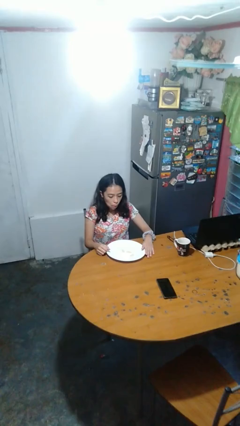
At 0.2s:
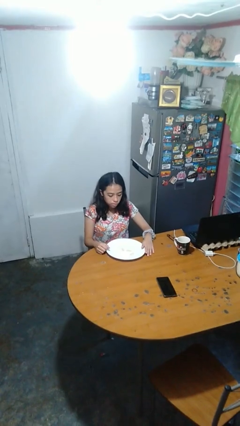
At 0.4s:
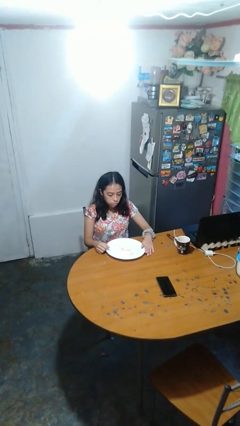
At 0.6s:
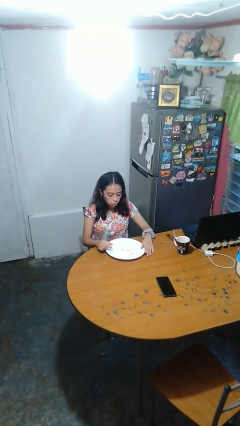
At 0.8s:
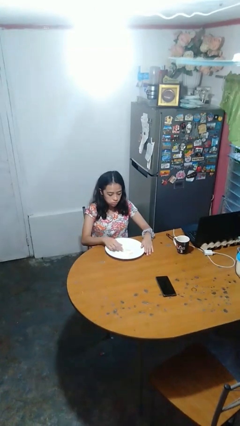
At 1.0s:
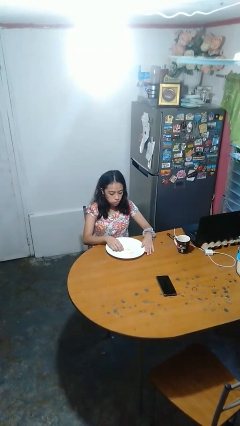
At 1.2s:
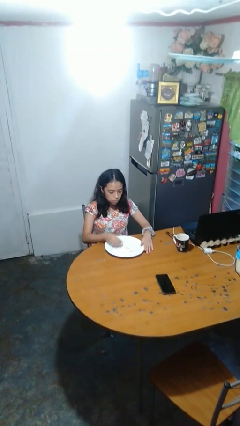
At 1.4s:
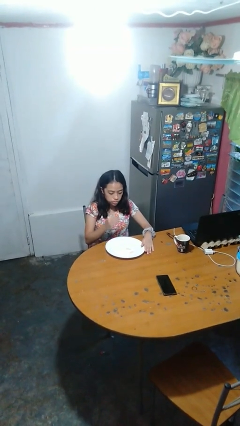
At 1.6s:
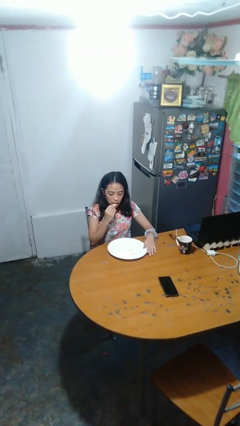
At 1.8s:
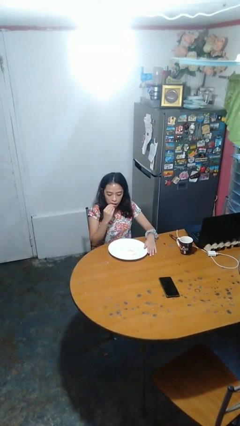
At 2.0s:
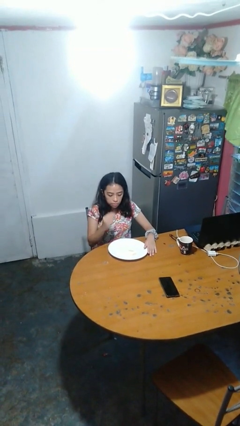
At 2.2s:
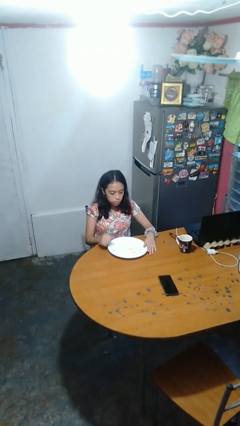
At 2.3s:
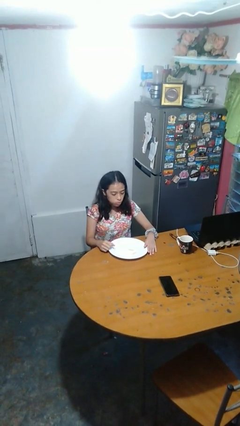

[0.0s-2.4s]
person eats with hands

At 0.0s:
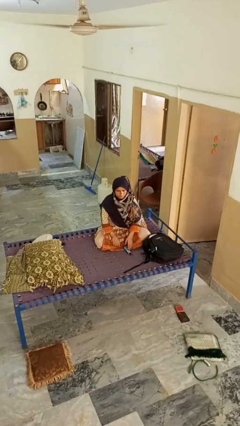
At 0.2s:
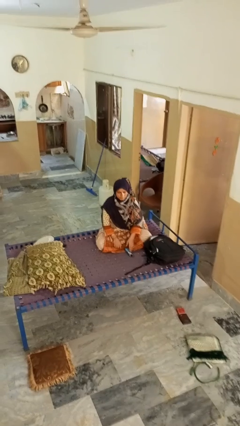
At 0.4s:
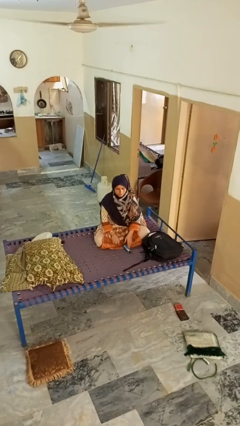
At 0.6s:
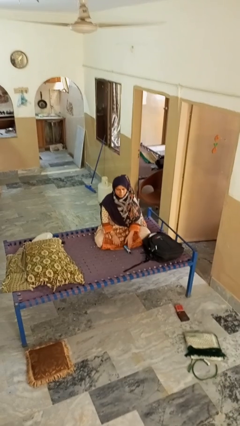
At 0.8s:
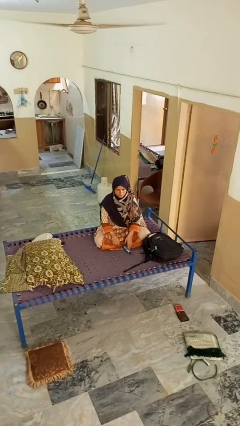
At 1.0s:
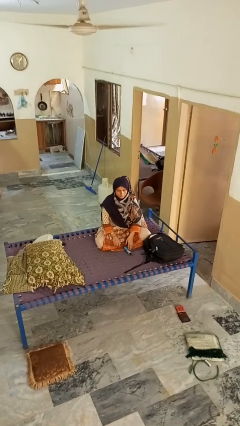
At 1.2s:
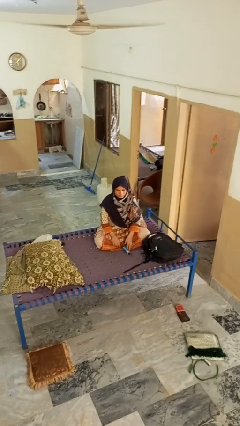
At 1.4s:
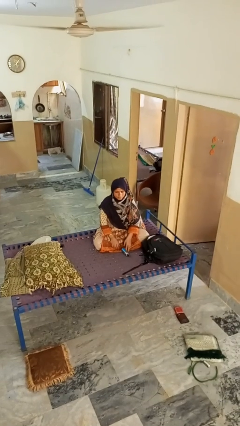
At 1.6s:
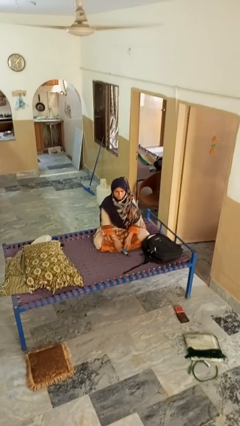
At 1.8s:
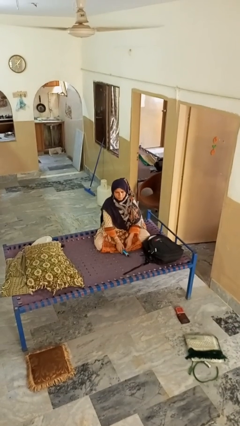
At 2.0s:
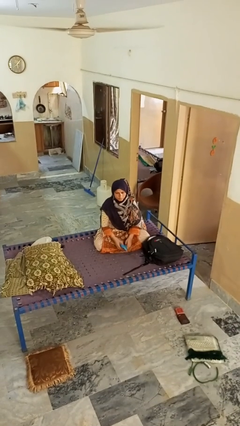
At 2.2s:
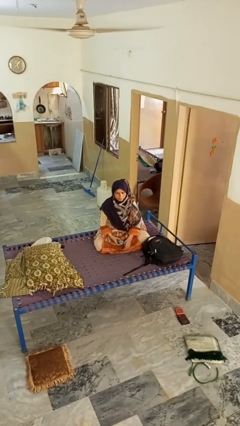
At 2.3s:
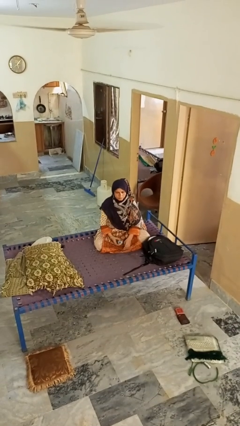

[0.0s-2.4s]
person picks up object from floor

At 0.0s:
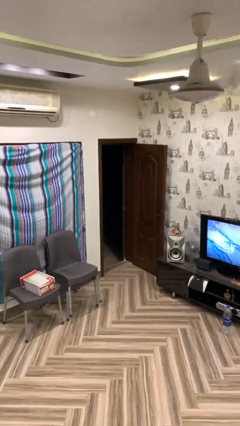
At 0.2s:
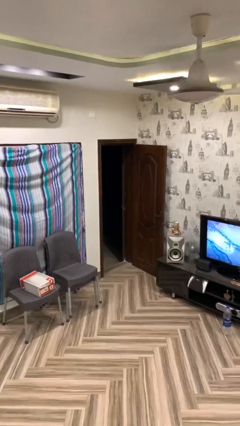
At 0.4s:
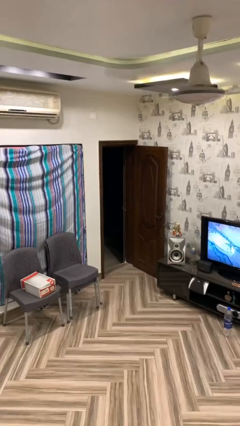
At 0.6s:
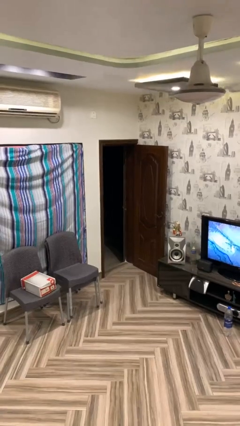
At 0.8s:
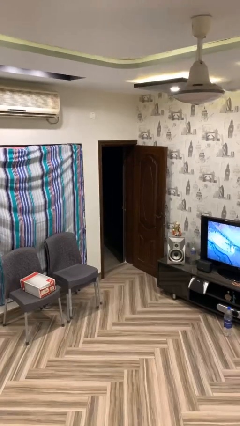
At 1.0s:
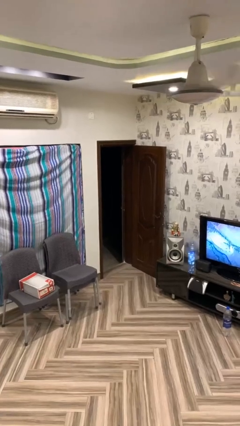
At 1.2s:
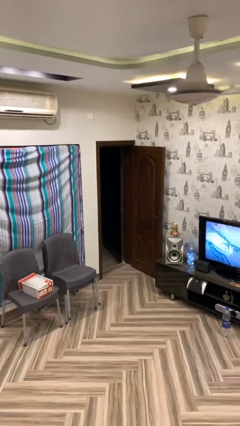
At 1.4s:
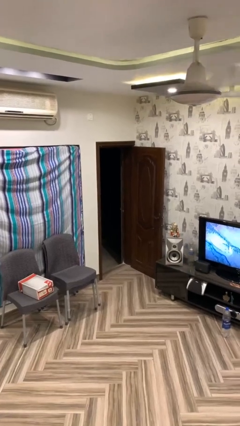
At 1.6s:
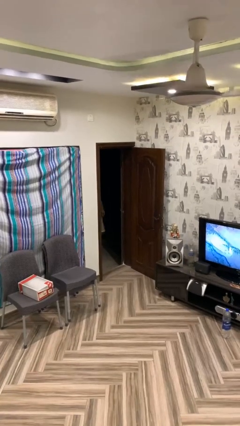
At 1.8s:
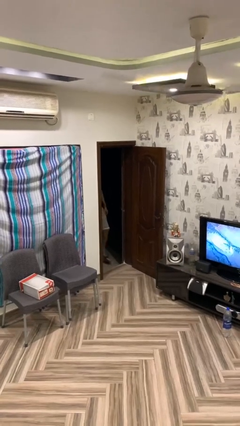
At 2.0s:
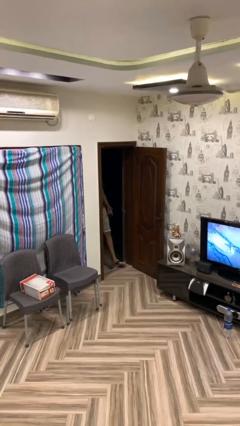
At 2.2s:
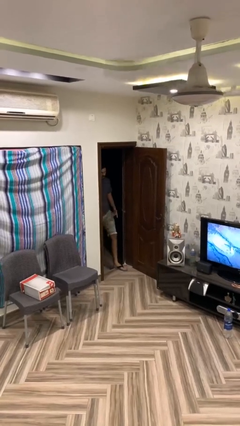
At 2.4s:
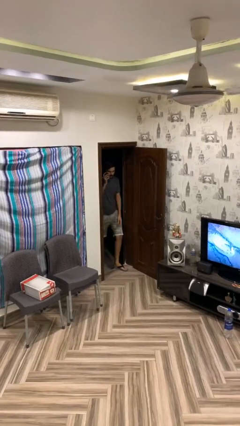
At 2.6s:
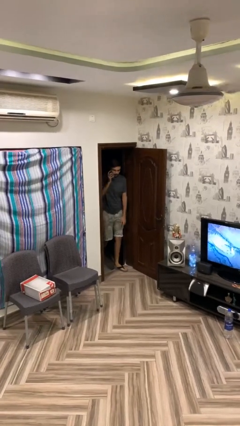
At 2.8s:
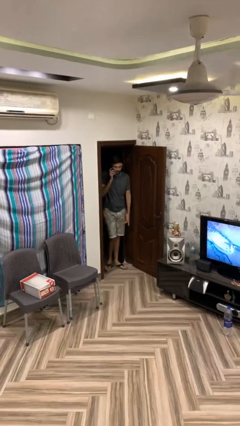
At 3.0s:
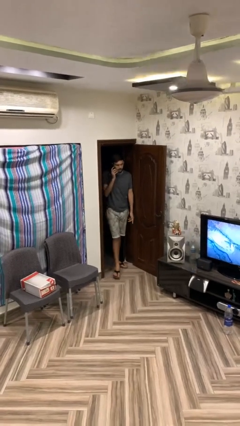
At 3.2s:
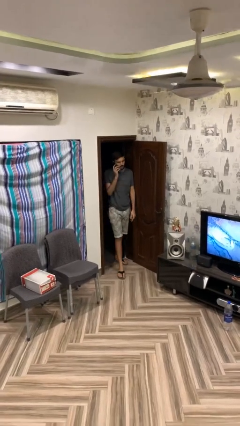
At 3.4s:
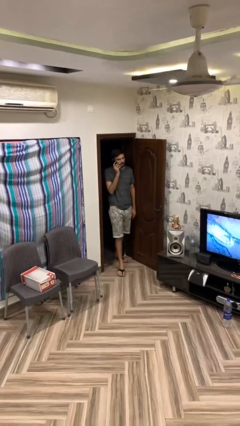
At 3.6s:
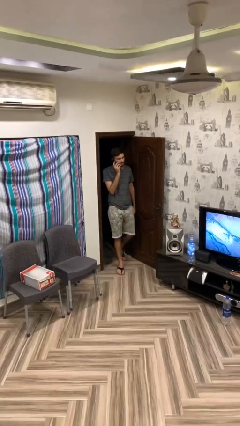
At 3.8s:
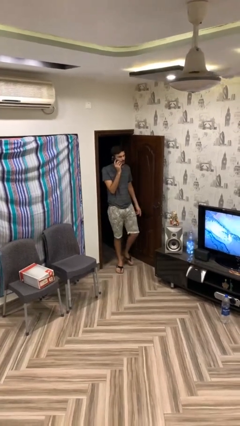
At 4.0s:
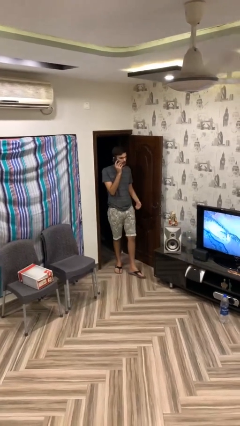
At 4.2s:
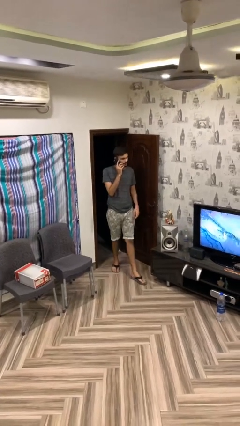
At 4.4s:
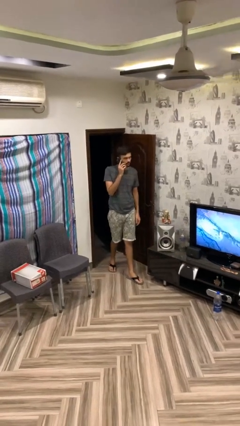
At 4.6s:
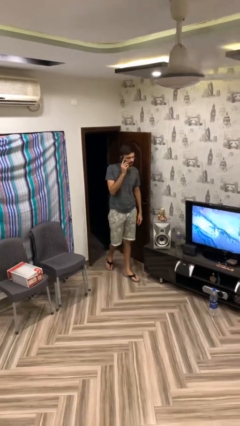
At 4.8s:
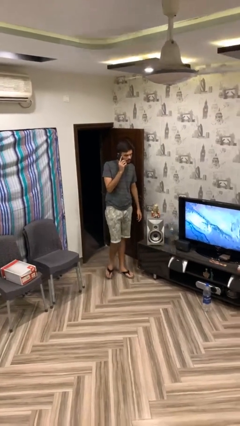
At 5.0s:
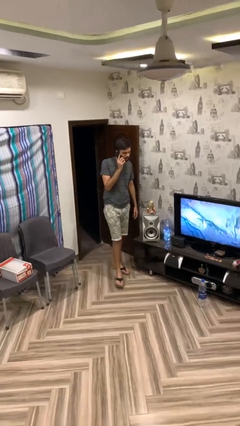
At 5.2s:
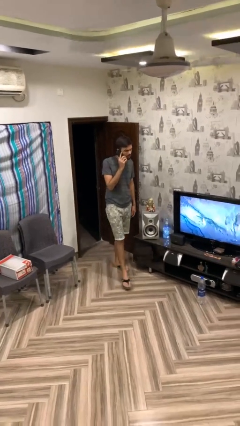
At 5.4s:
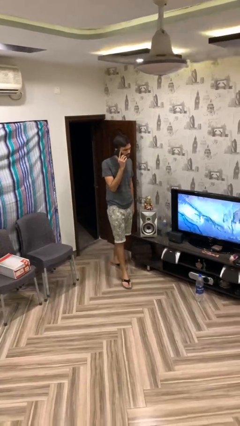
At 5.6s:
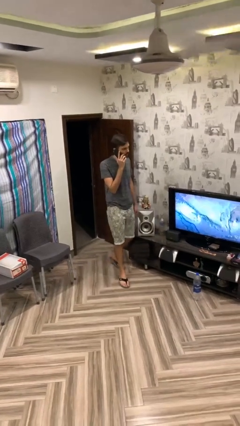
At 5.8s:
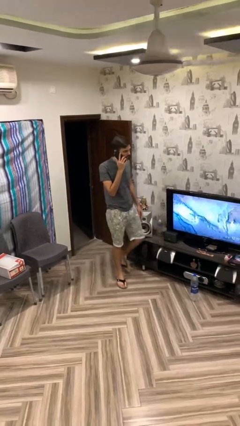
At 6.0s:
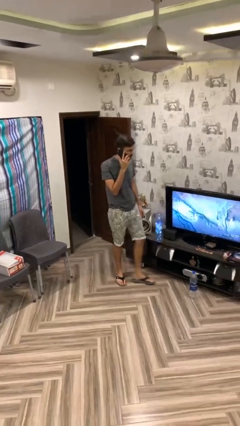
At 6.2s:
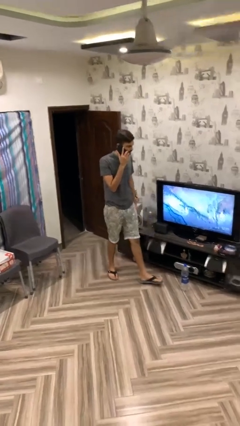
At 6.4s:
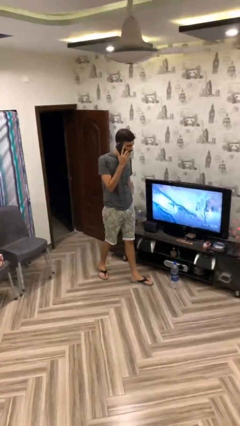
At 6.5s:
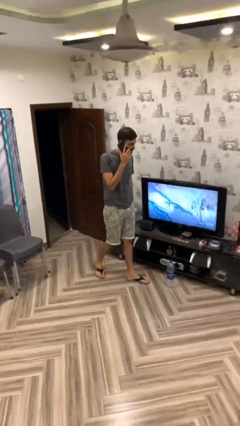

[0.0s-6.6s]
person enters scene through structure

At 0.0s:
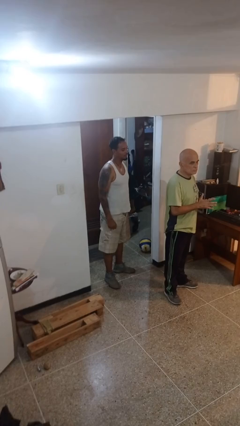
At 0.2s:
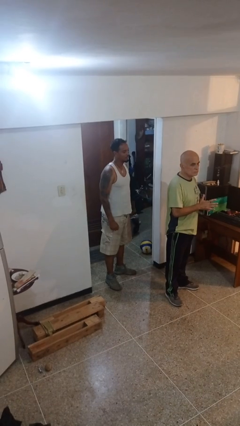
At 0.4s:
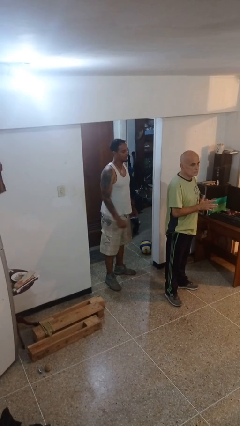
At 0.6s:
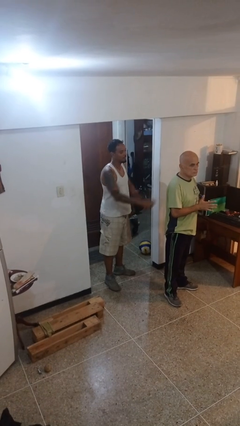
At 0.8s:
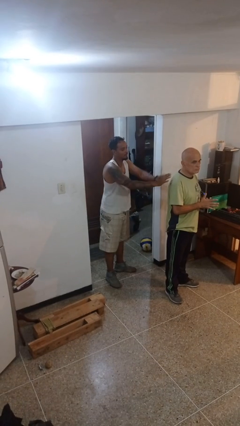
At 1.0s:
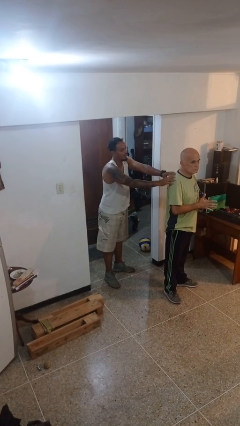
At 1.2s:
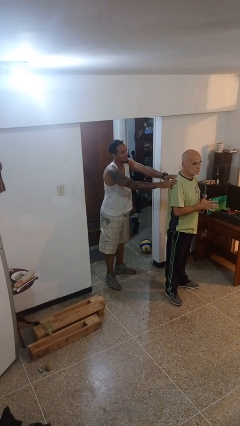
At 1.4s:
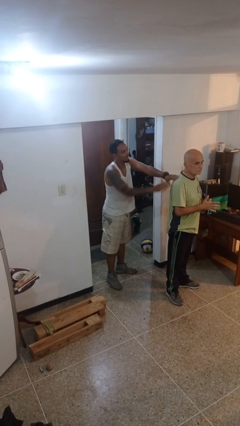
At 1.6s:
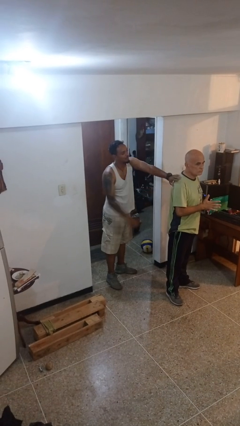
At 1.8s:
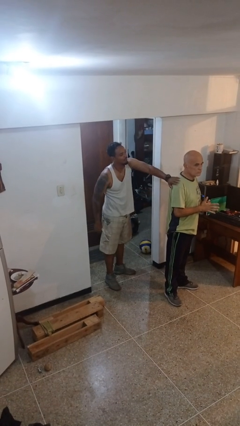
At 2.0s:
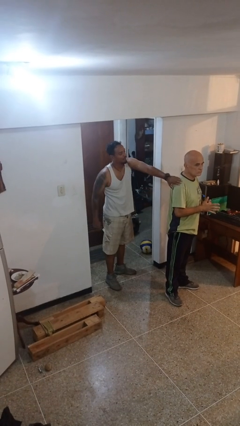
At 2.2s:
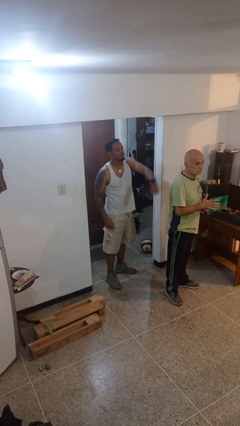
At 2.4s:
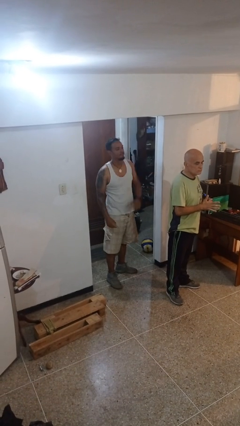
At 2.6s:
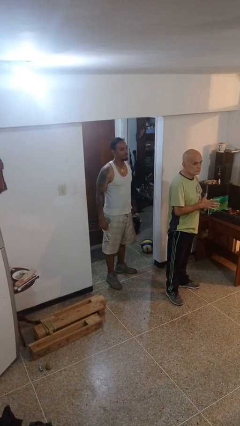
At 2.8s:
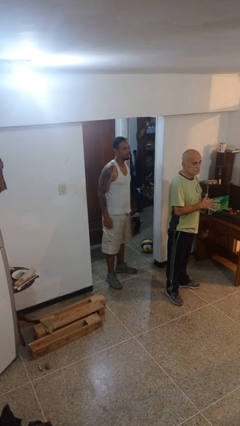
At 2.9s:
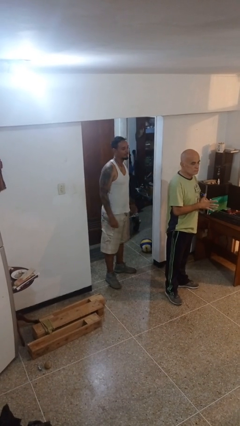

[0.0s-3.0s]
person touches back of person

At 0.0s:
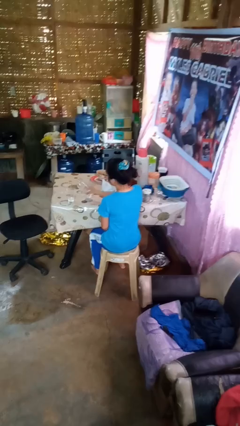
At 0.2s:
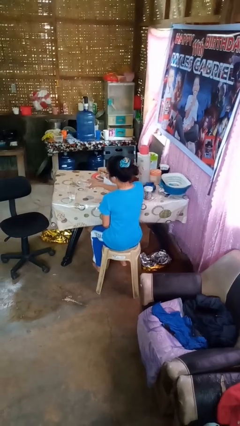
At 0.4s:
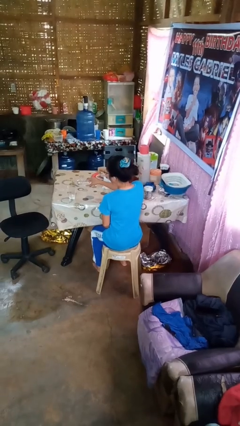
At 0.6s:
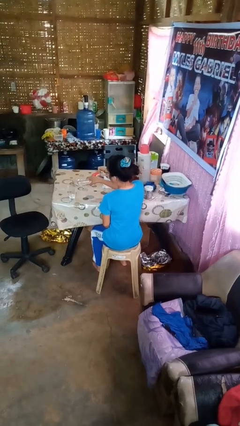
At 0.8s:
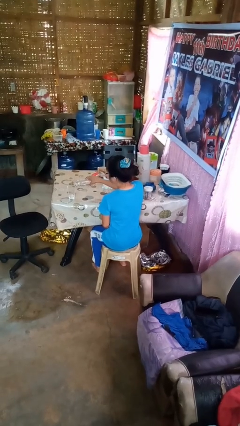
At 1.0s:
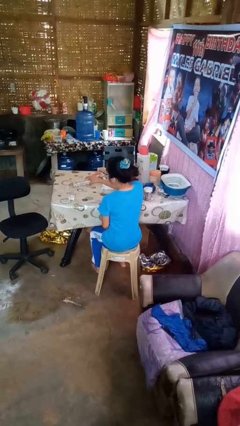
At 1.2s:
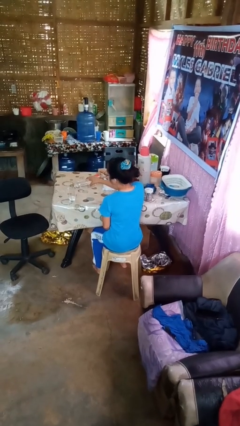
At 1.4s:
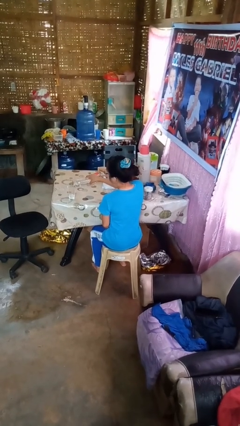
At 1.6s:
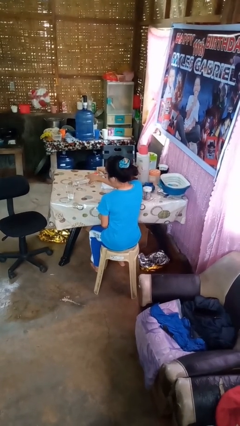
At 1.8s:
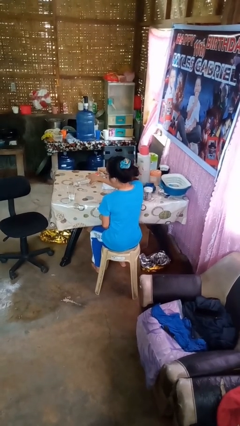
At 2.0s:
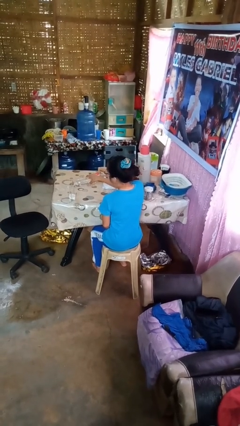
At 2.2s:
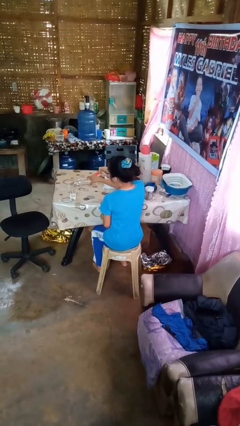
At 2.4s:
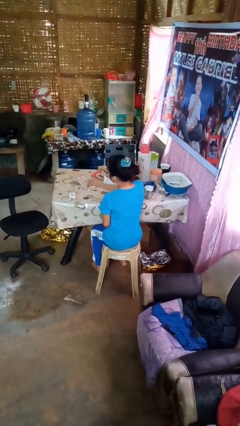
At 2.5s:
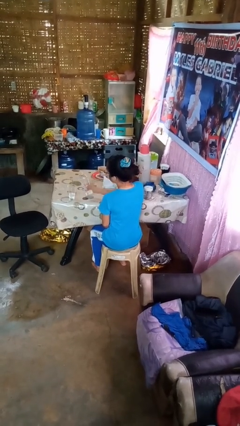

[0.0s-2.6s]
person pours liquid into cup

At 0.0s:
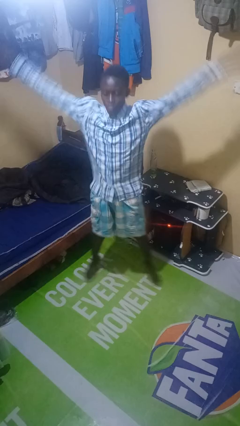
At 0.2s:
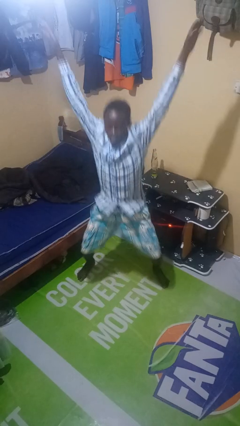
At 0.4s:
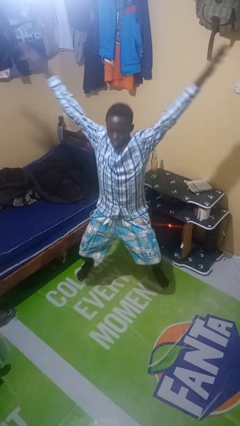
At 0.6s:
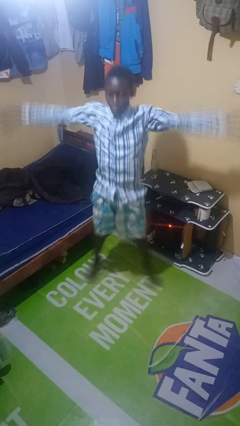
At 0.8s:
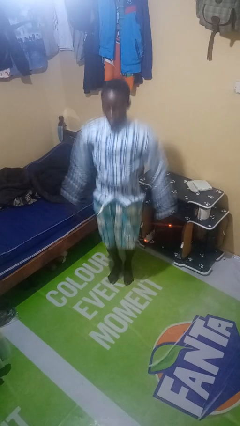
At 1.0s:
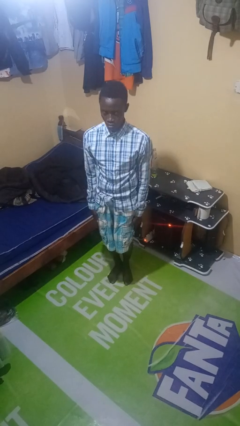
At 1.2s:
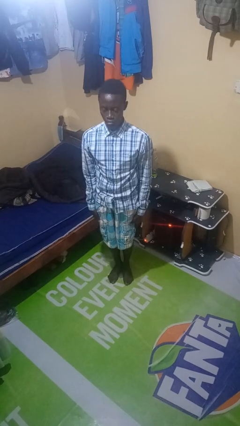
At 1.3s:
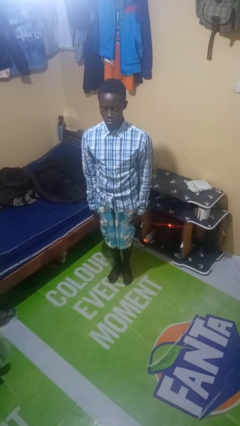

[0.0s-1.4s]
person exercises with jumping jacks
